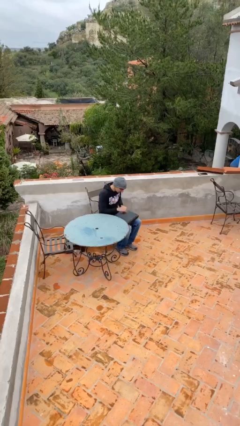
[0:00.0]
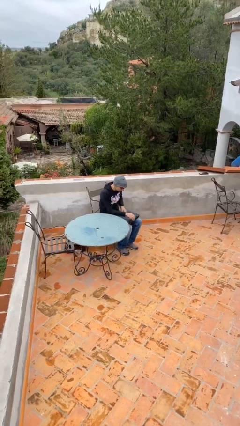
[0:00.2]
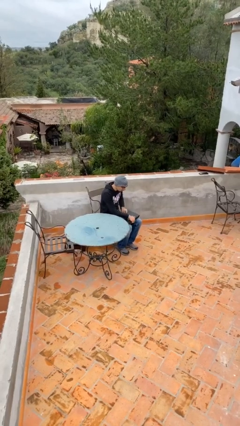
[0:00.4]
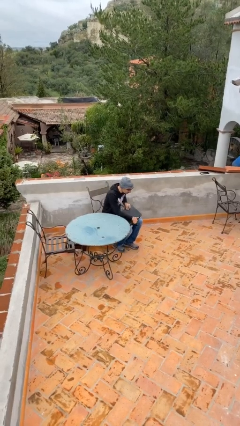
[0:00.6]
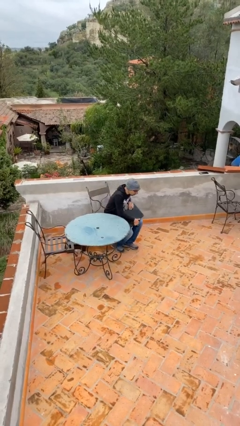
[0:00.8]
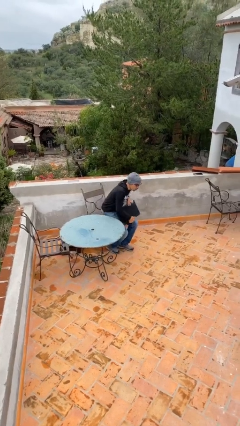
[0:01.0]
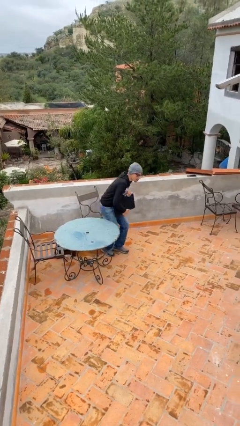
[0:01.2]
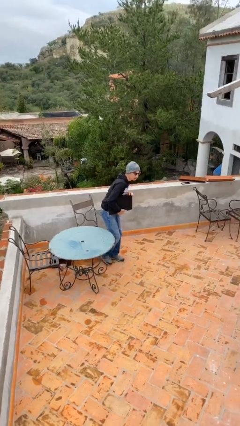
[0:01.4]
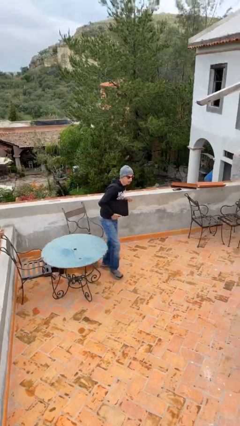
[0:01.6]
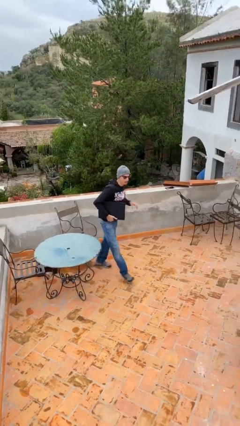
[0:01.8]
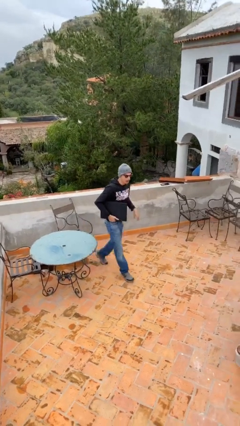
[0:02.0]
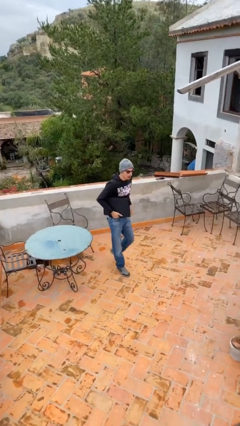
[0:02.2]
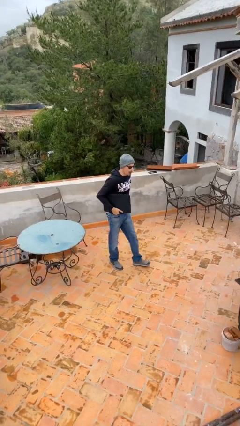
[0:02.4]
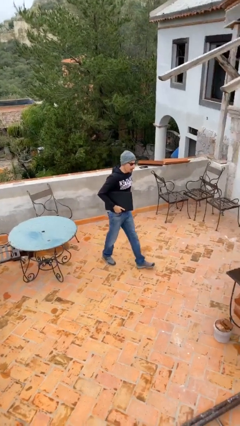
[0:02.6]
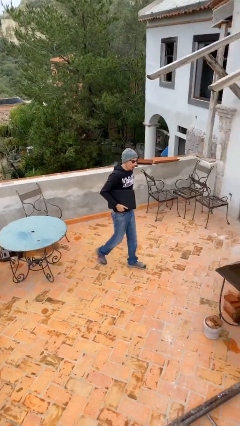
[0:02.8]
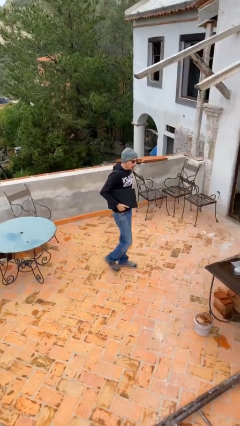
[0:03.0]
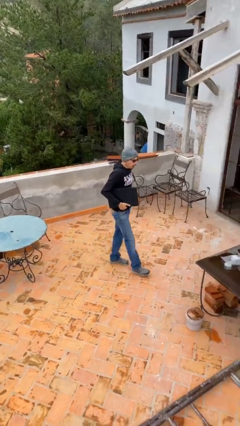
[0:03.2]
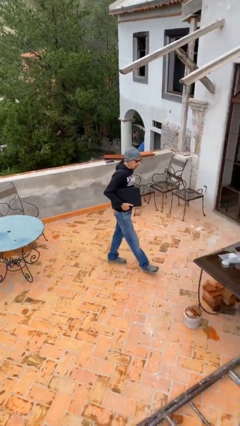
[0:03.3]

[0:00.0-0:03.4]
person stands up

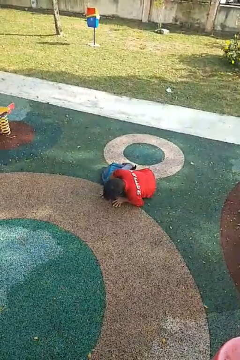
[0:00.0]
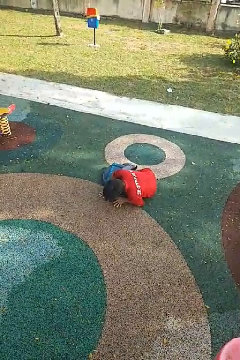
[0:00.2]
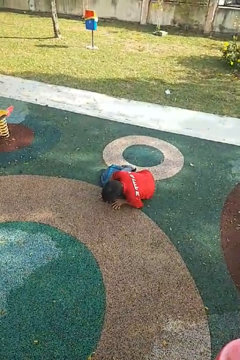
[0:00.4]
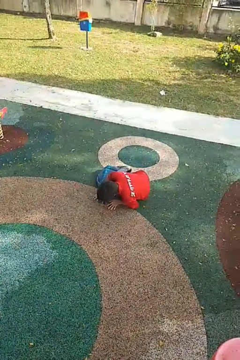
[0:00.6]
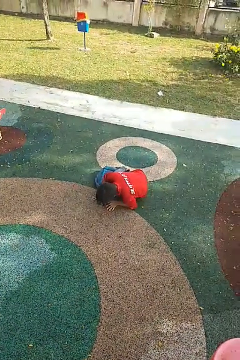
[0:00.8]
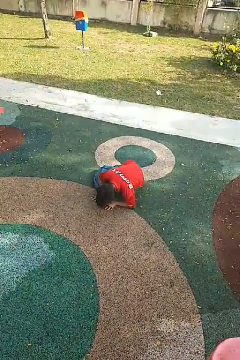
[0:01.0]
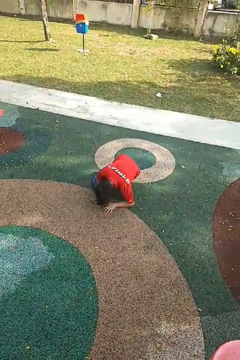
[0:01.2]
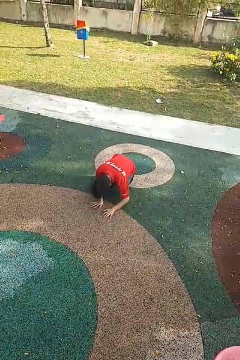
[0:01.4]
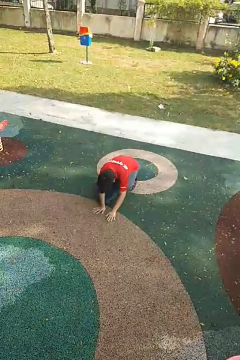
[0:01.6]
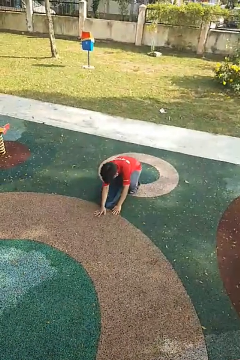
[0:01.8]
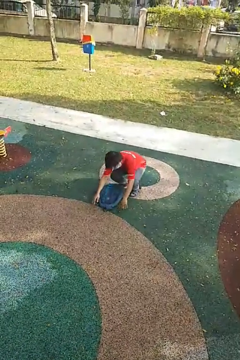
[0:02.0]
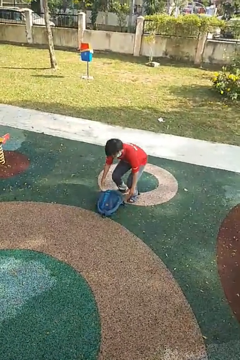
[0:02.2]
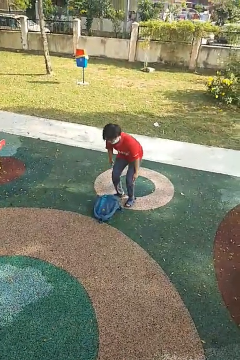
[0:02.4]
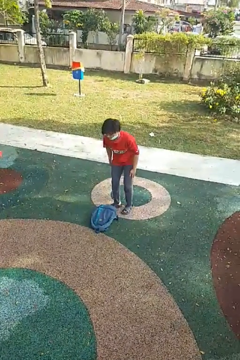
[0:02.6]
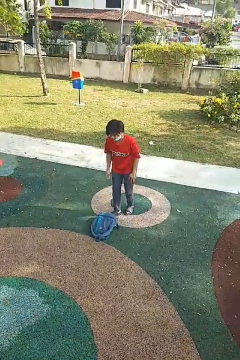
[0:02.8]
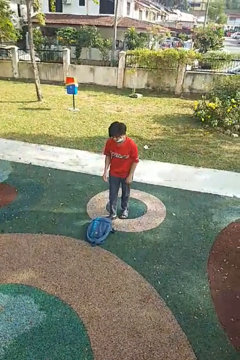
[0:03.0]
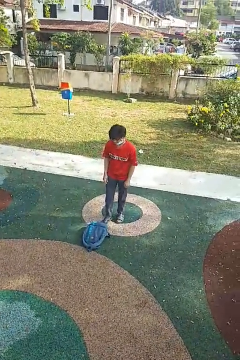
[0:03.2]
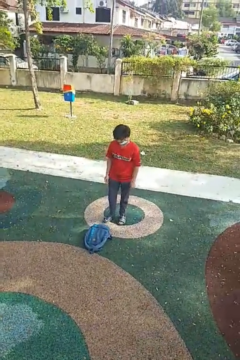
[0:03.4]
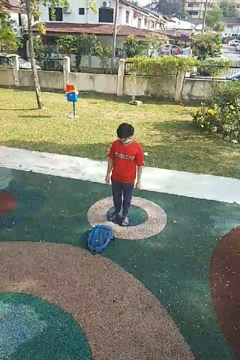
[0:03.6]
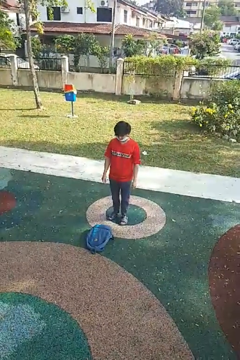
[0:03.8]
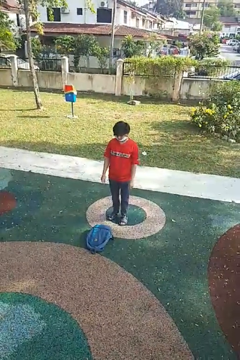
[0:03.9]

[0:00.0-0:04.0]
person stands up from floor

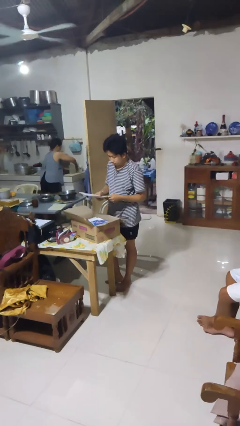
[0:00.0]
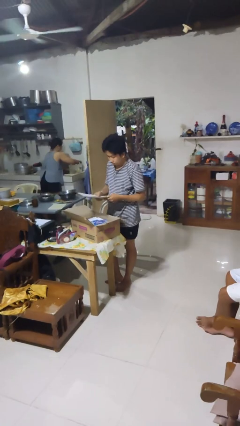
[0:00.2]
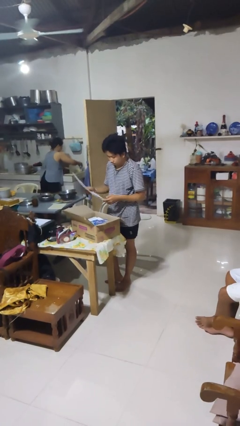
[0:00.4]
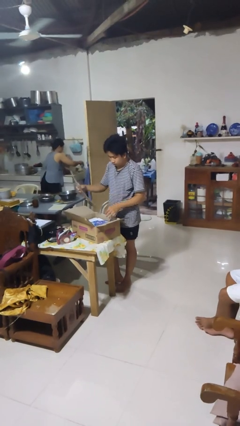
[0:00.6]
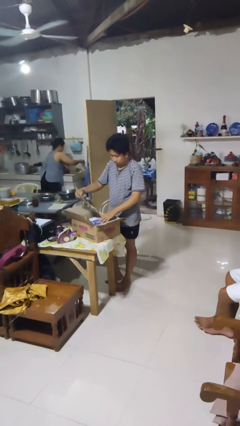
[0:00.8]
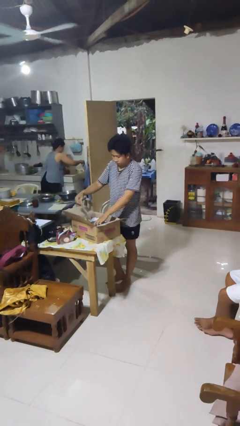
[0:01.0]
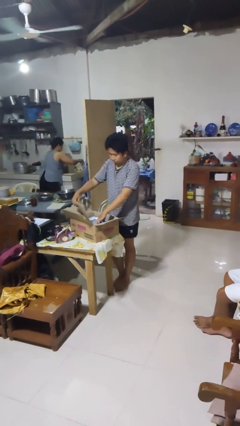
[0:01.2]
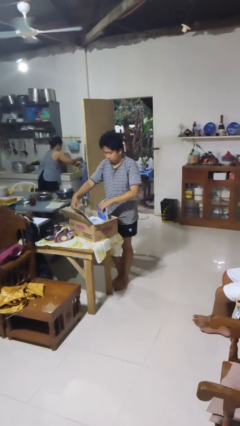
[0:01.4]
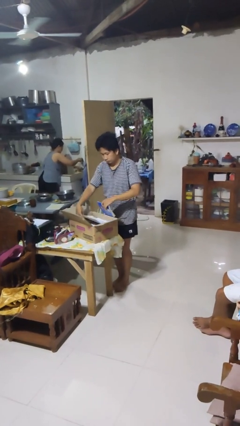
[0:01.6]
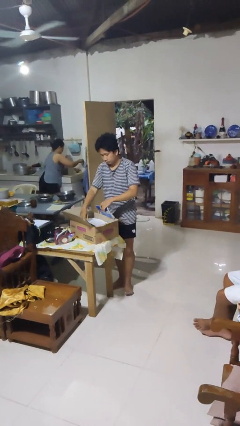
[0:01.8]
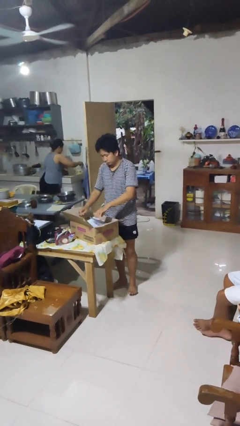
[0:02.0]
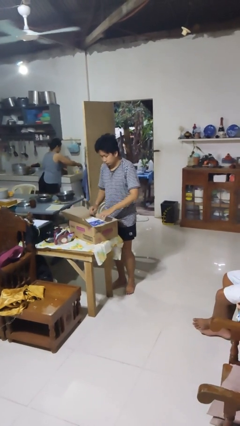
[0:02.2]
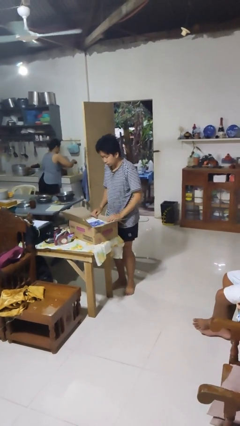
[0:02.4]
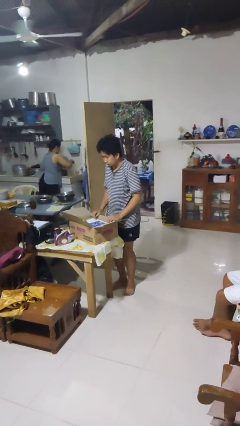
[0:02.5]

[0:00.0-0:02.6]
person puts object into box

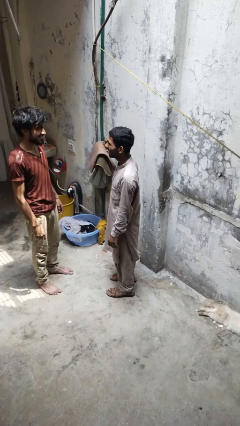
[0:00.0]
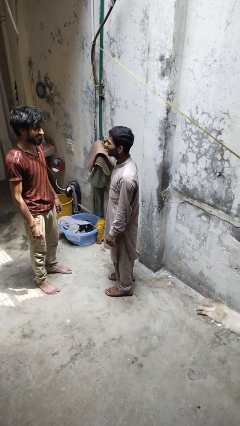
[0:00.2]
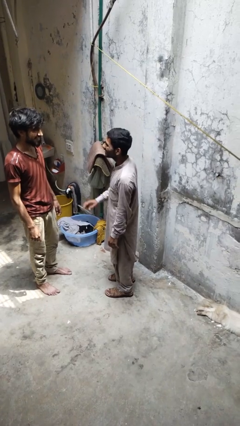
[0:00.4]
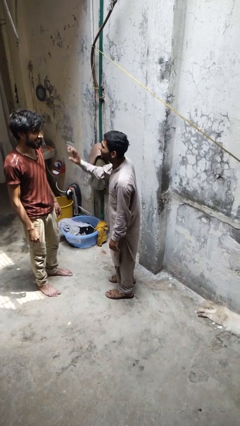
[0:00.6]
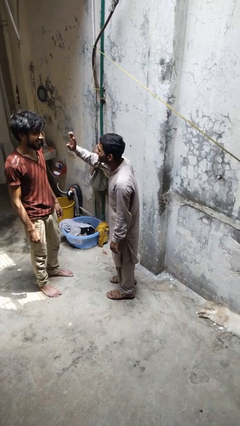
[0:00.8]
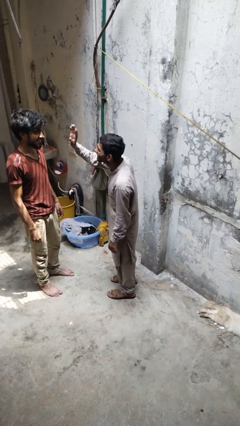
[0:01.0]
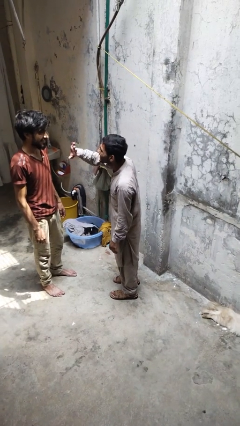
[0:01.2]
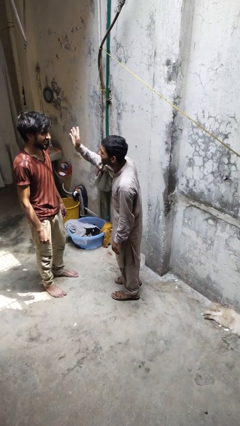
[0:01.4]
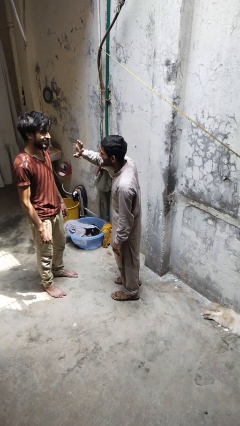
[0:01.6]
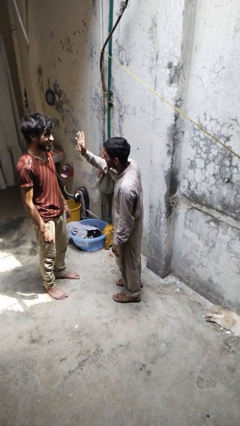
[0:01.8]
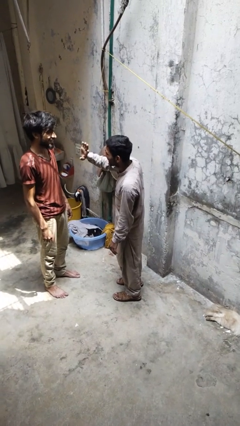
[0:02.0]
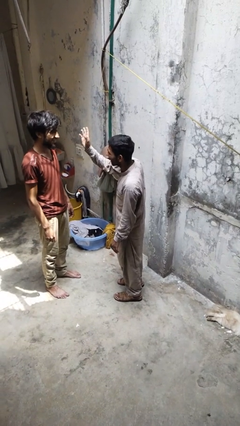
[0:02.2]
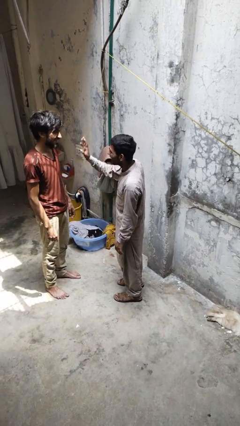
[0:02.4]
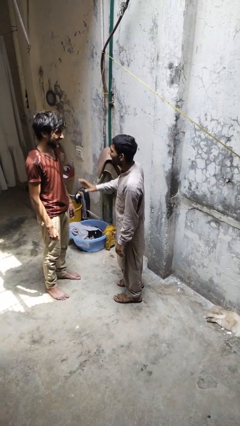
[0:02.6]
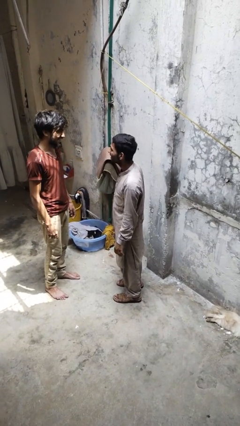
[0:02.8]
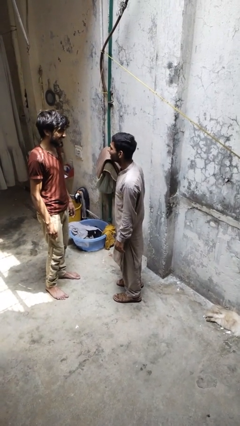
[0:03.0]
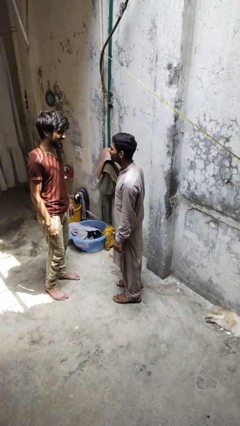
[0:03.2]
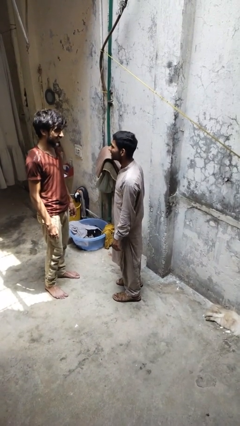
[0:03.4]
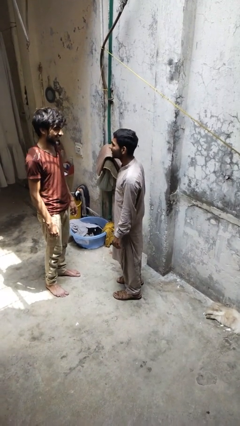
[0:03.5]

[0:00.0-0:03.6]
person waves at person

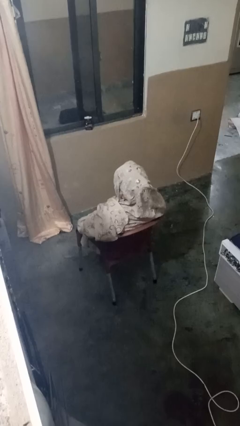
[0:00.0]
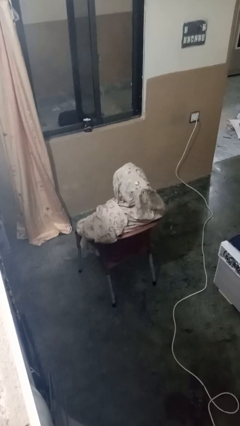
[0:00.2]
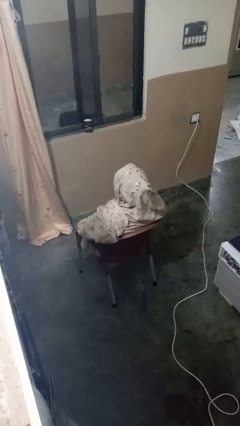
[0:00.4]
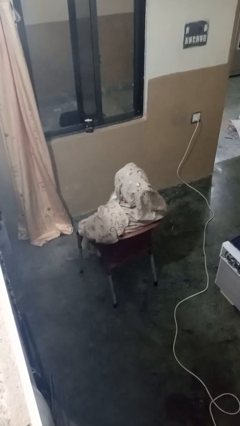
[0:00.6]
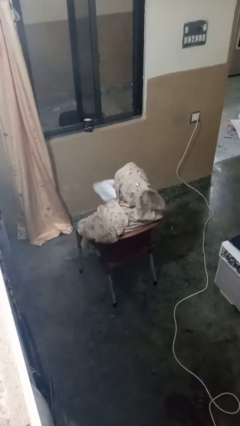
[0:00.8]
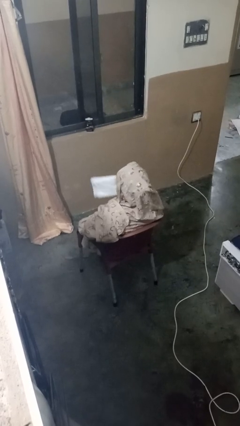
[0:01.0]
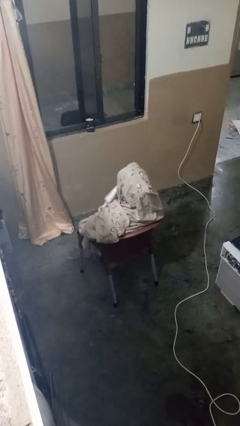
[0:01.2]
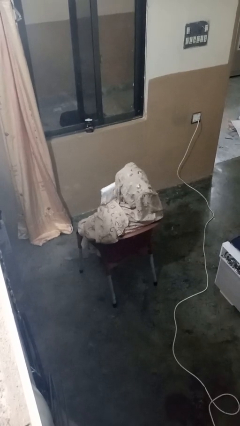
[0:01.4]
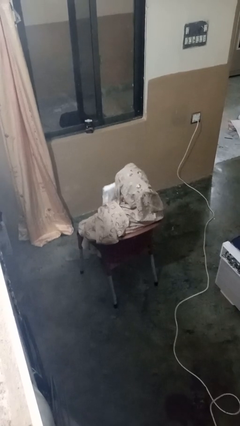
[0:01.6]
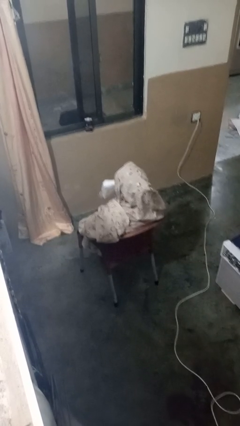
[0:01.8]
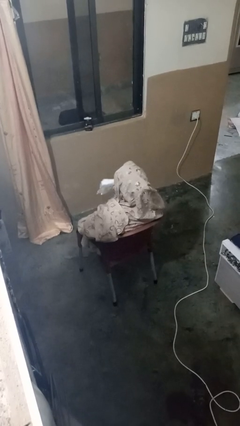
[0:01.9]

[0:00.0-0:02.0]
person wipes mouth with napkin

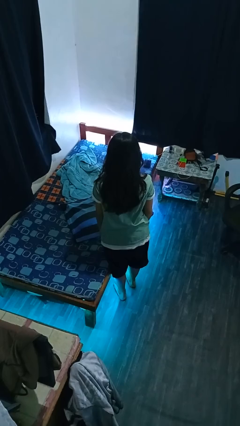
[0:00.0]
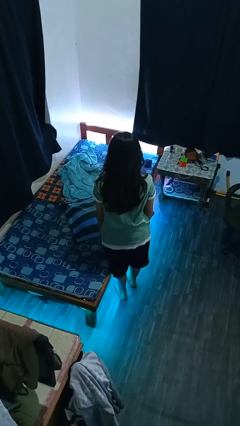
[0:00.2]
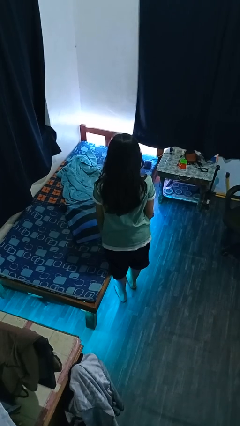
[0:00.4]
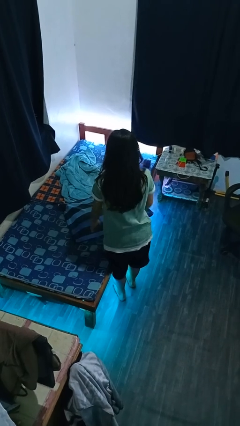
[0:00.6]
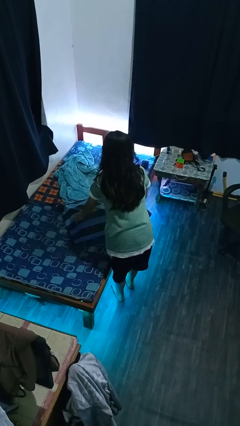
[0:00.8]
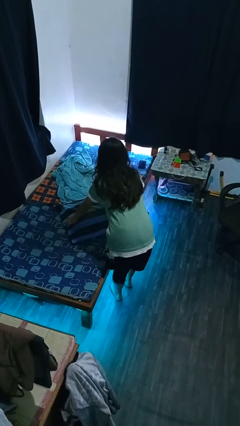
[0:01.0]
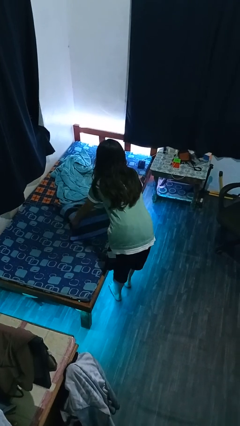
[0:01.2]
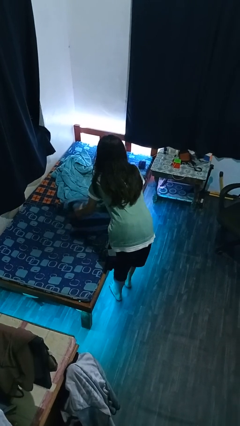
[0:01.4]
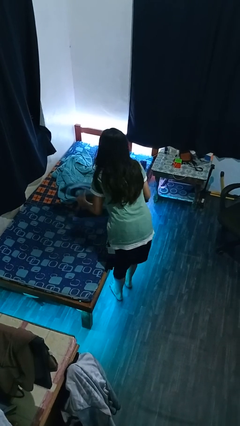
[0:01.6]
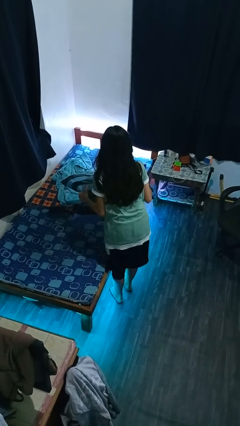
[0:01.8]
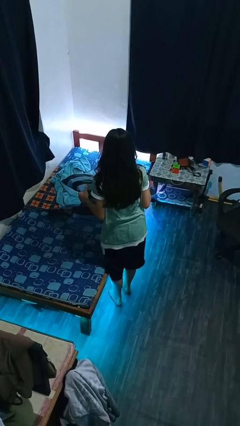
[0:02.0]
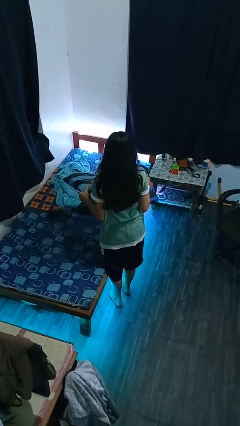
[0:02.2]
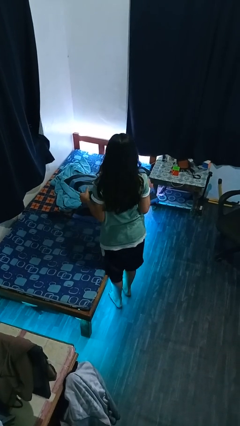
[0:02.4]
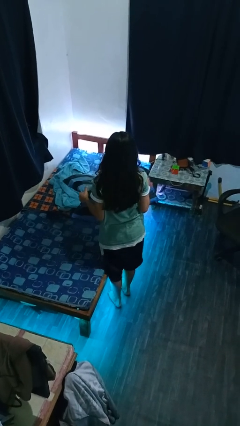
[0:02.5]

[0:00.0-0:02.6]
person picks up object from bed
